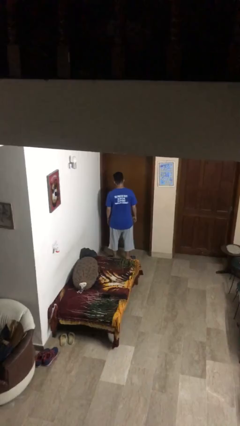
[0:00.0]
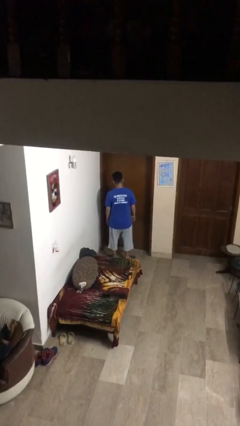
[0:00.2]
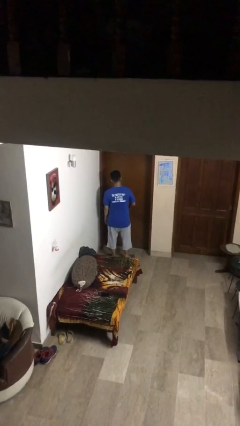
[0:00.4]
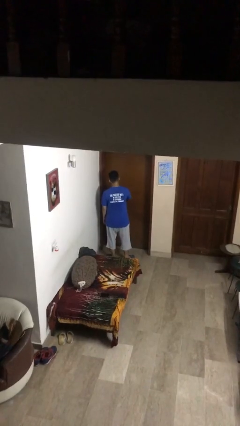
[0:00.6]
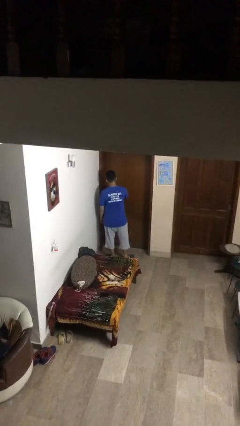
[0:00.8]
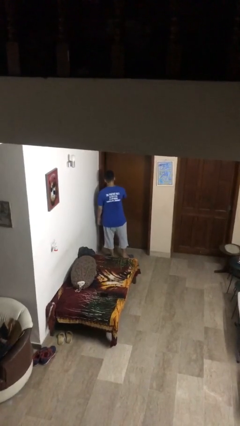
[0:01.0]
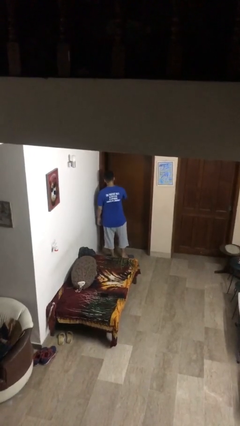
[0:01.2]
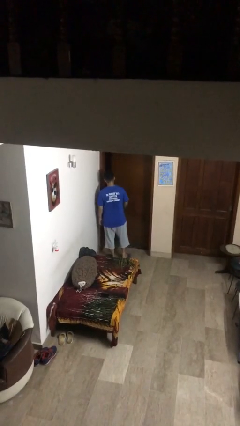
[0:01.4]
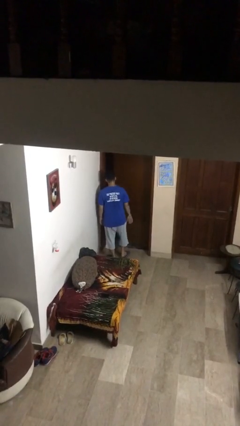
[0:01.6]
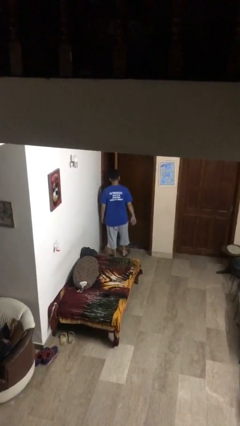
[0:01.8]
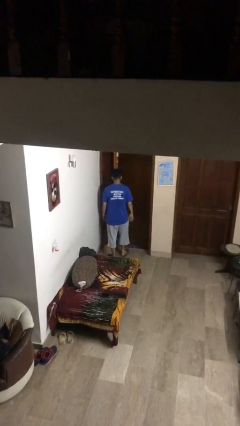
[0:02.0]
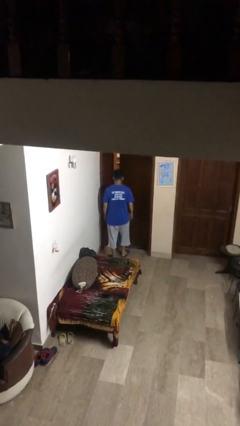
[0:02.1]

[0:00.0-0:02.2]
person opens facility door

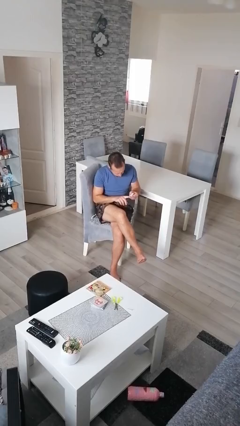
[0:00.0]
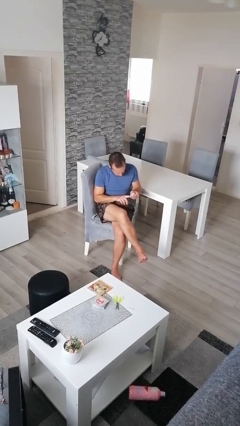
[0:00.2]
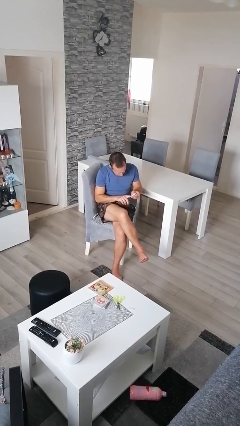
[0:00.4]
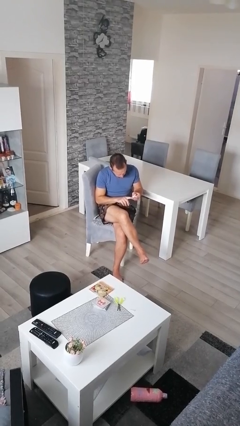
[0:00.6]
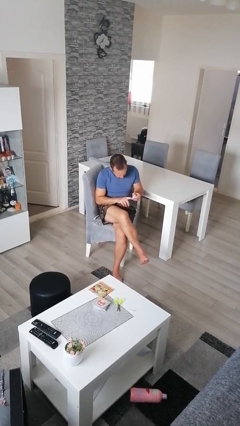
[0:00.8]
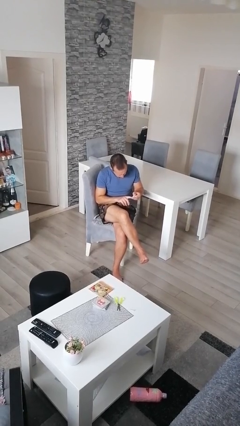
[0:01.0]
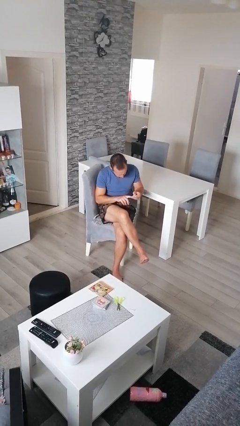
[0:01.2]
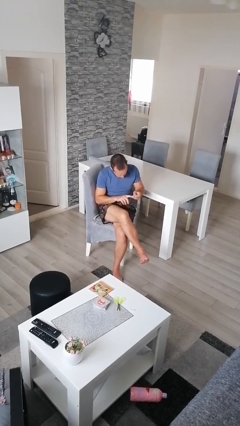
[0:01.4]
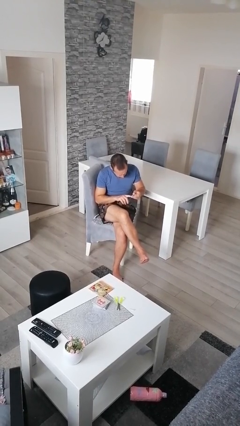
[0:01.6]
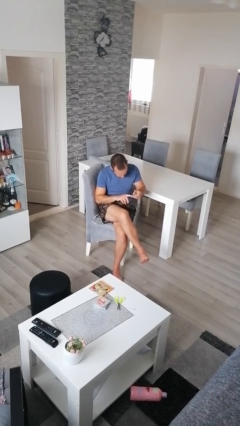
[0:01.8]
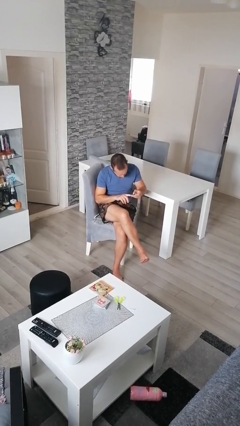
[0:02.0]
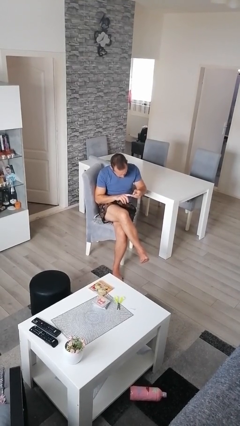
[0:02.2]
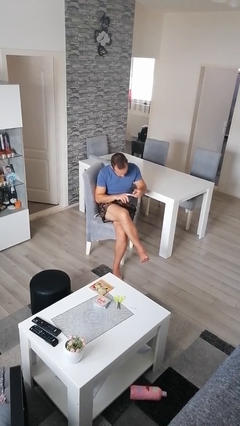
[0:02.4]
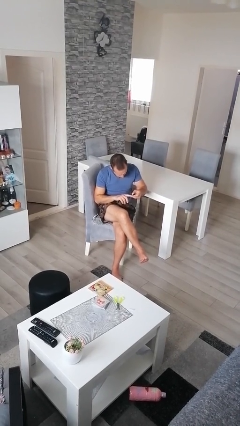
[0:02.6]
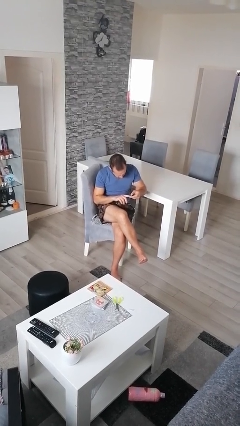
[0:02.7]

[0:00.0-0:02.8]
person clips fingernails

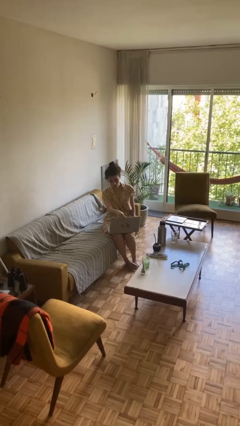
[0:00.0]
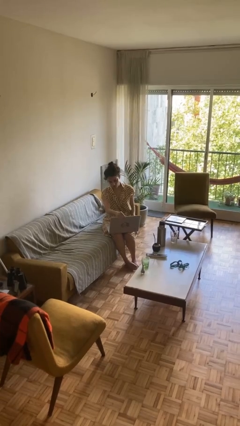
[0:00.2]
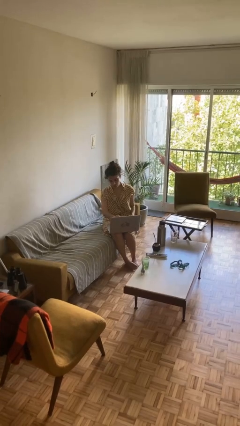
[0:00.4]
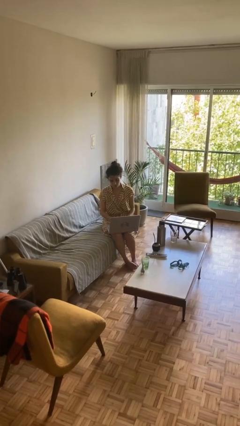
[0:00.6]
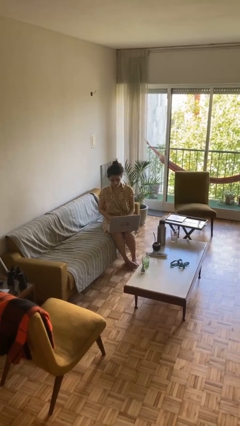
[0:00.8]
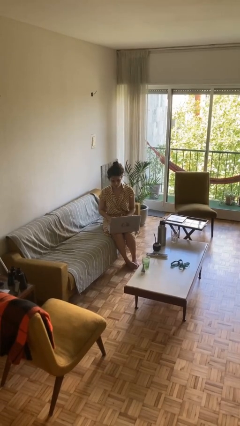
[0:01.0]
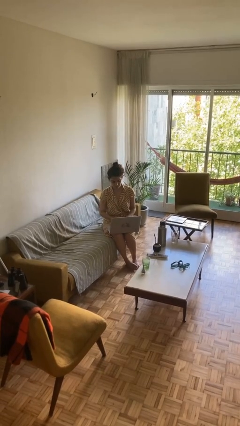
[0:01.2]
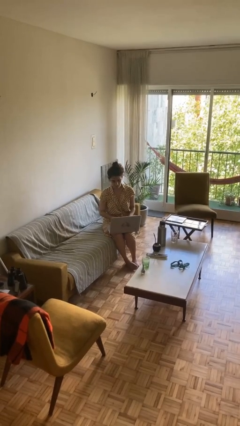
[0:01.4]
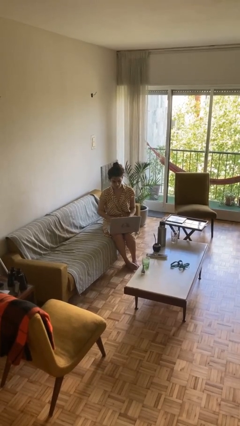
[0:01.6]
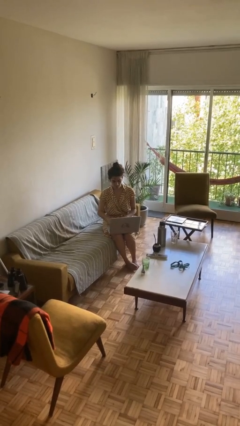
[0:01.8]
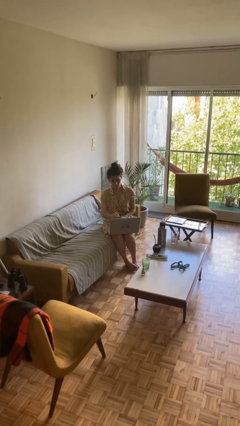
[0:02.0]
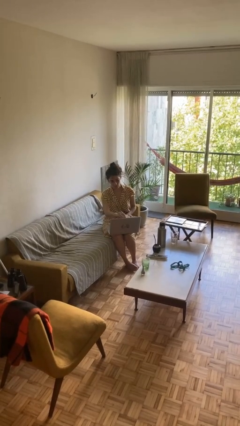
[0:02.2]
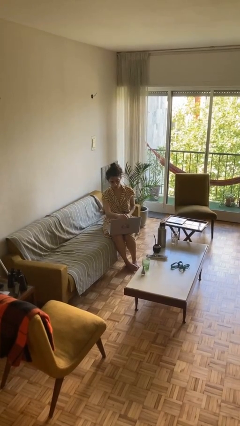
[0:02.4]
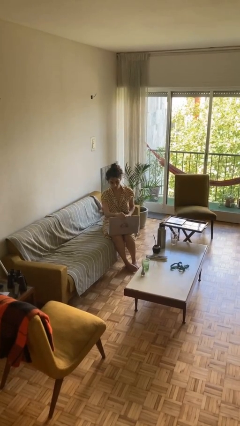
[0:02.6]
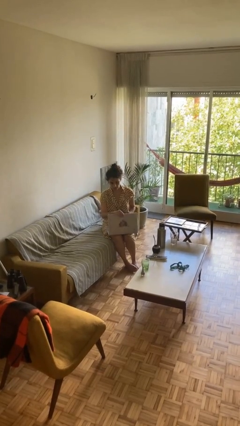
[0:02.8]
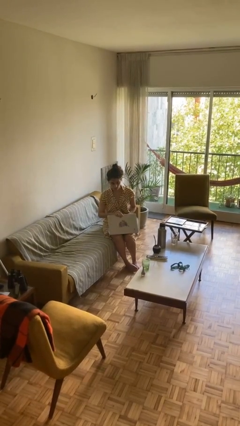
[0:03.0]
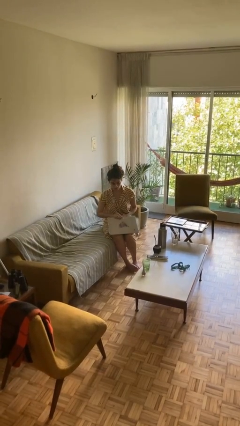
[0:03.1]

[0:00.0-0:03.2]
person interacts with laptop

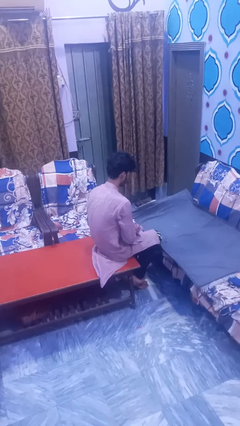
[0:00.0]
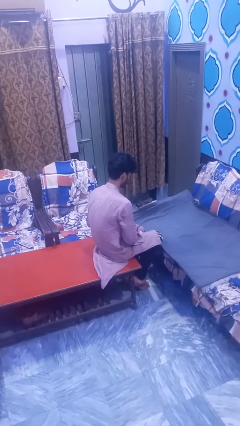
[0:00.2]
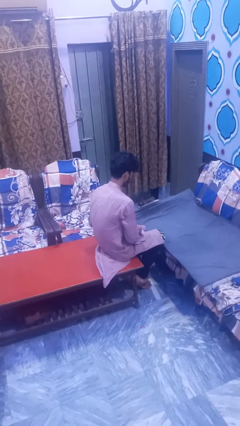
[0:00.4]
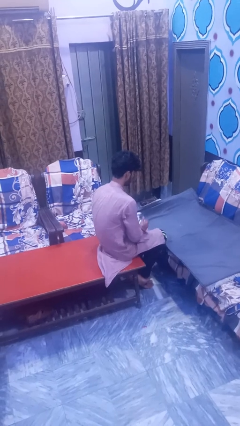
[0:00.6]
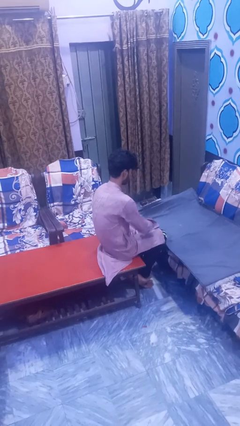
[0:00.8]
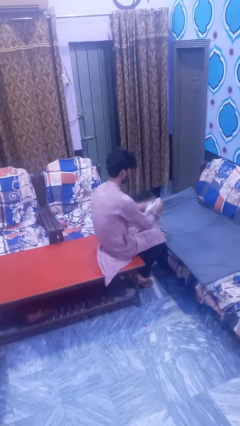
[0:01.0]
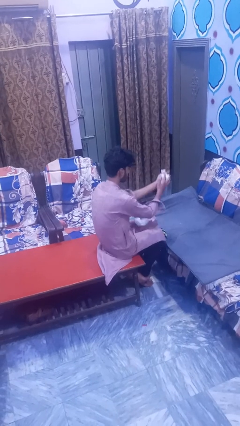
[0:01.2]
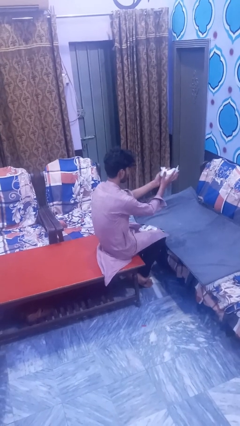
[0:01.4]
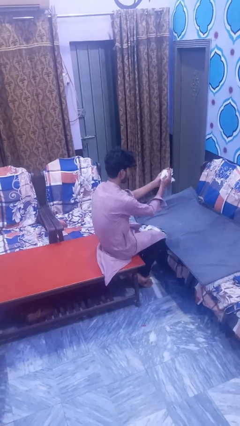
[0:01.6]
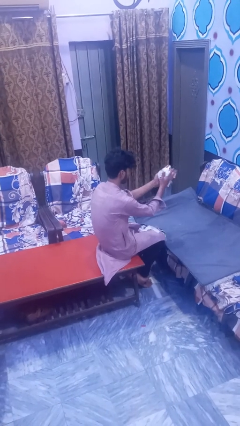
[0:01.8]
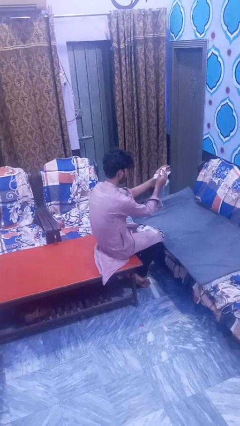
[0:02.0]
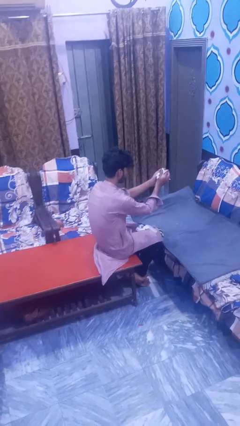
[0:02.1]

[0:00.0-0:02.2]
person crumples paper

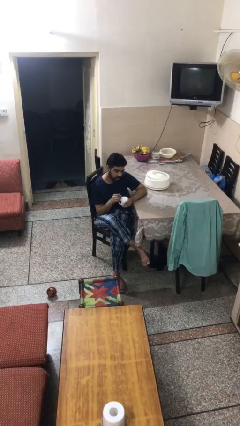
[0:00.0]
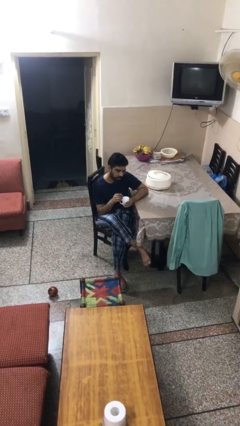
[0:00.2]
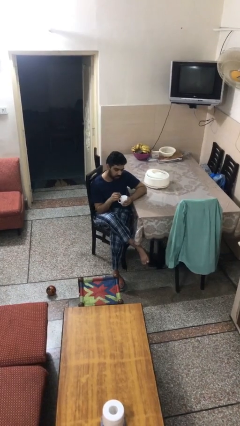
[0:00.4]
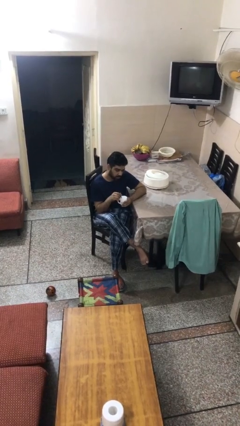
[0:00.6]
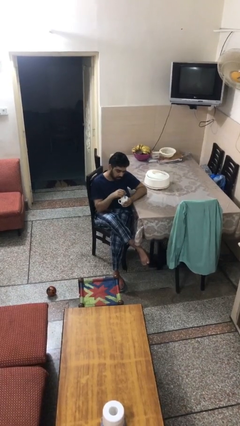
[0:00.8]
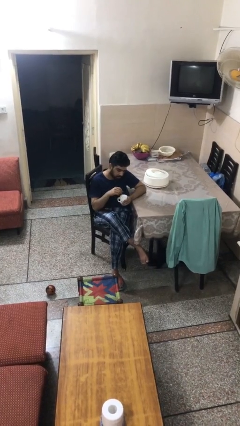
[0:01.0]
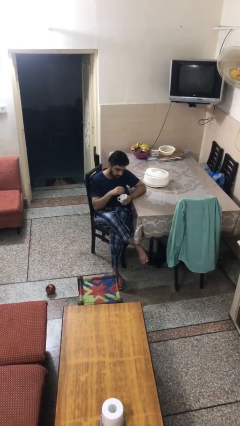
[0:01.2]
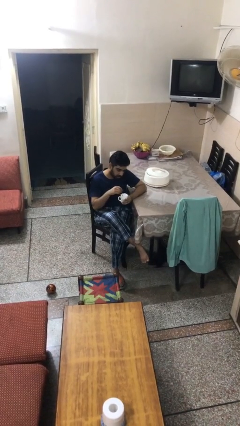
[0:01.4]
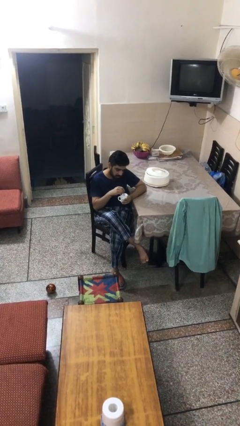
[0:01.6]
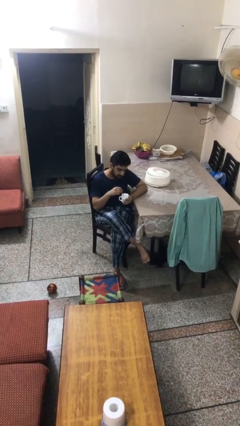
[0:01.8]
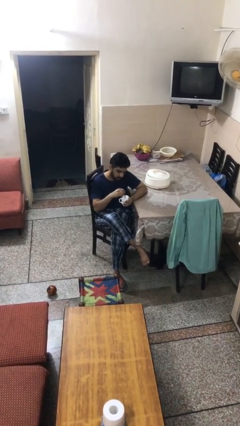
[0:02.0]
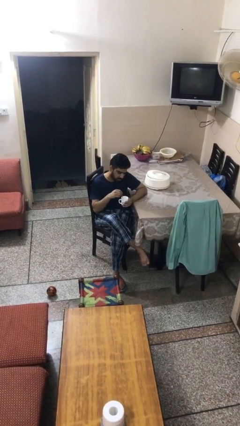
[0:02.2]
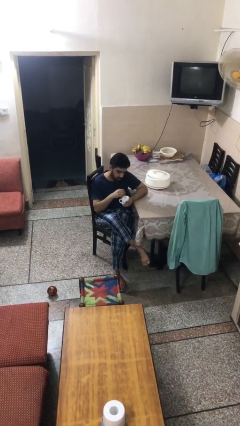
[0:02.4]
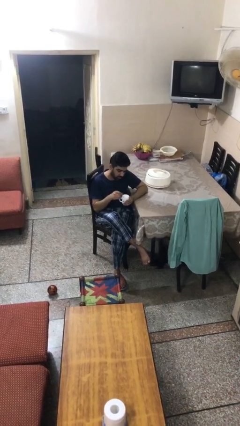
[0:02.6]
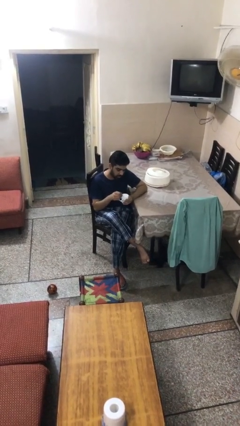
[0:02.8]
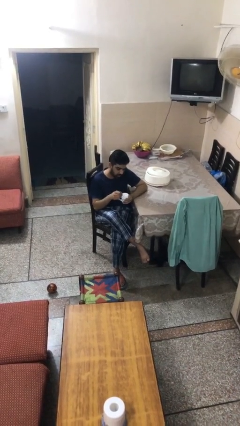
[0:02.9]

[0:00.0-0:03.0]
person stirs mug

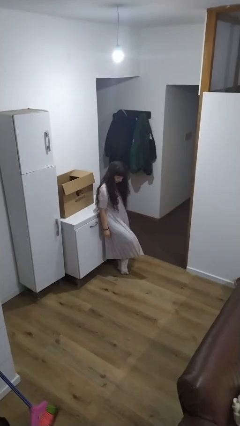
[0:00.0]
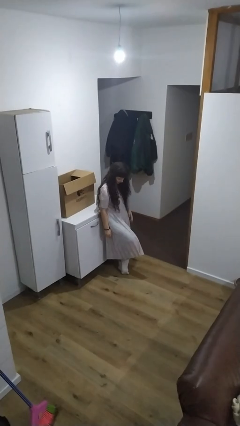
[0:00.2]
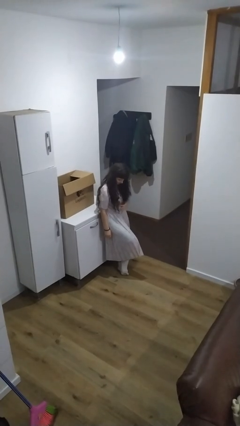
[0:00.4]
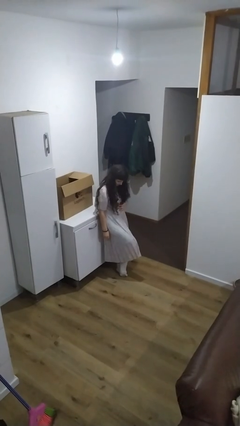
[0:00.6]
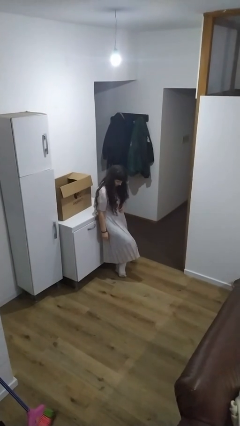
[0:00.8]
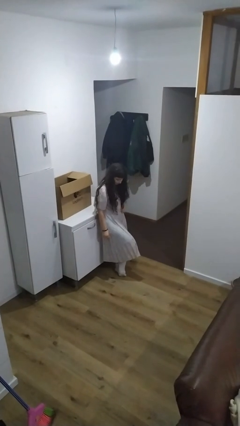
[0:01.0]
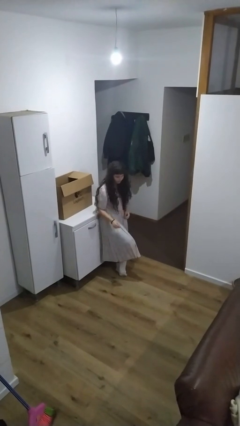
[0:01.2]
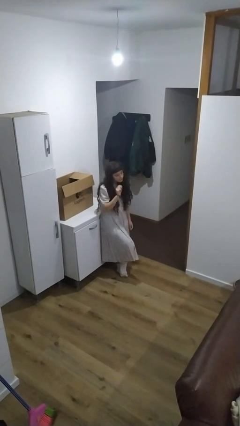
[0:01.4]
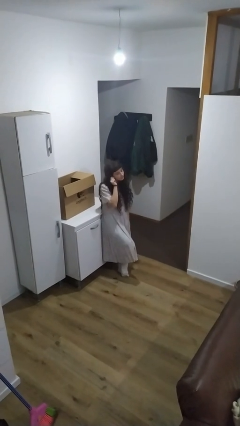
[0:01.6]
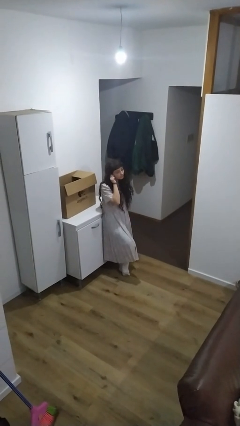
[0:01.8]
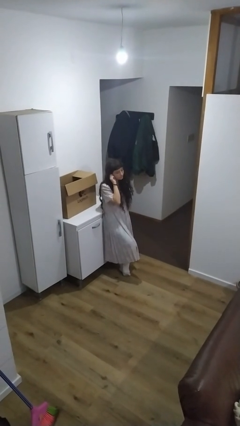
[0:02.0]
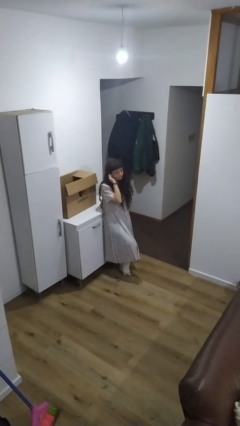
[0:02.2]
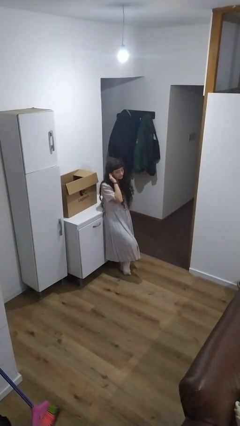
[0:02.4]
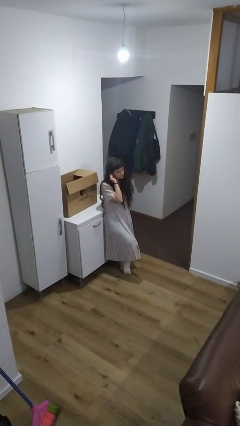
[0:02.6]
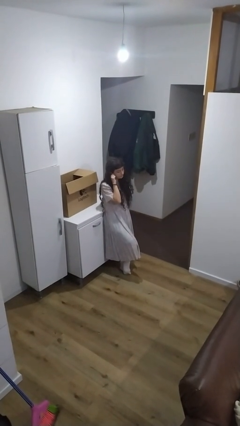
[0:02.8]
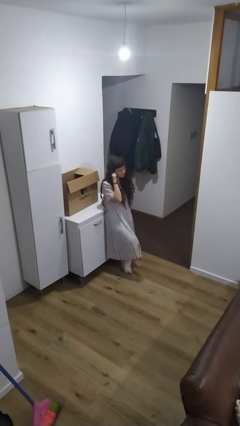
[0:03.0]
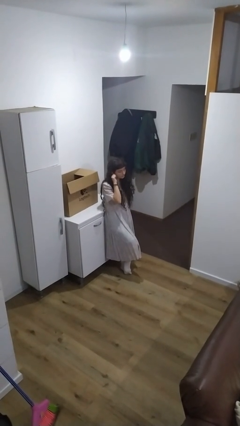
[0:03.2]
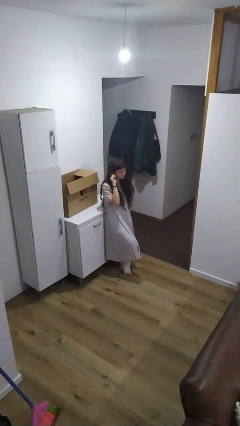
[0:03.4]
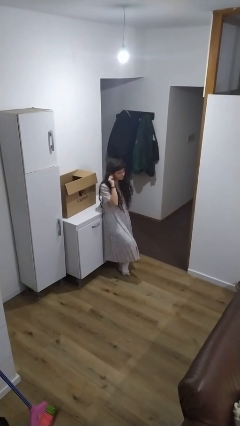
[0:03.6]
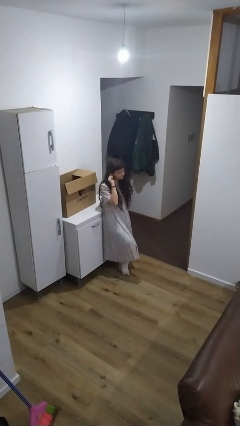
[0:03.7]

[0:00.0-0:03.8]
person touches earlobe
